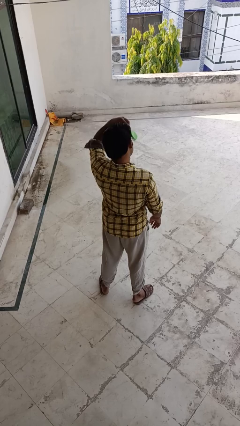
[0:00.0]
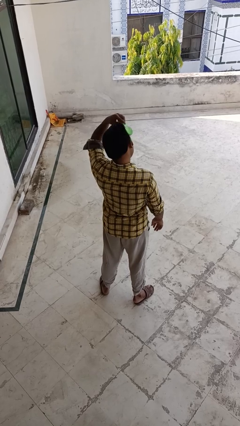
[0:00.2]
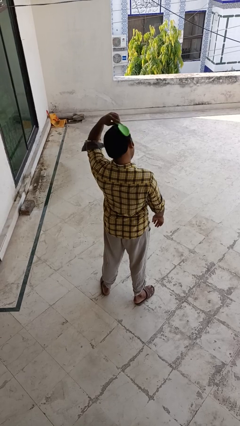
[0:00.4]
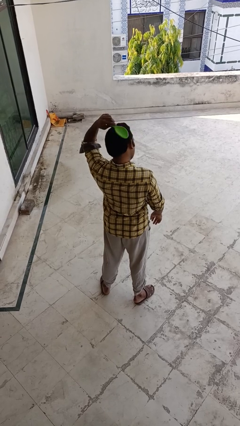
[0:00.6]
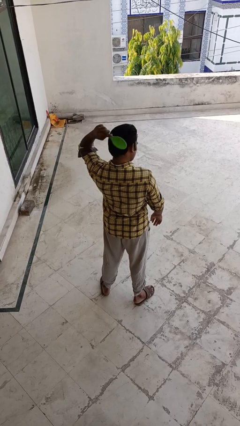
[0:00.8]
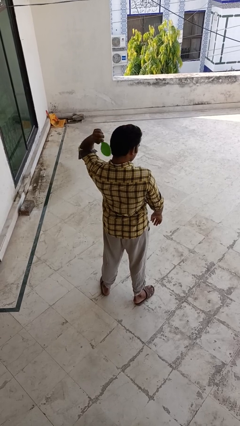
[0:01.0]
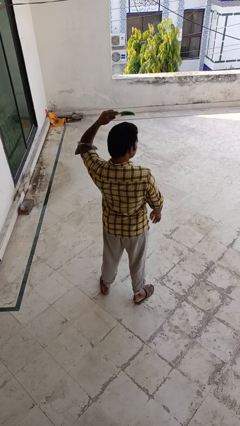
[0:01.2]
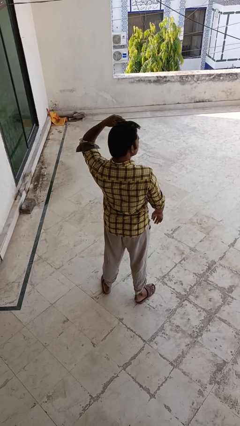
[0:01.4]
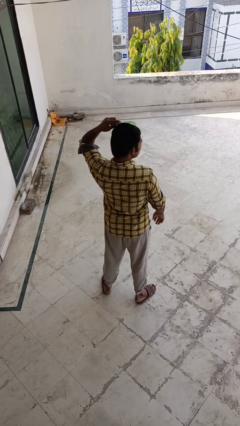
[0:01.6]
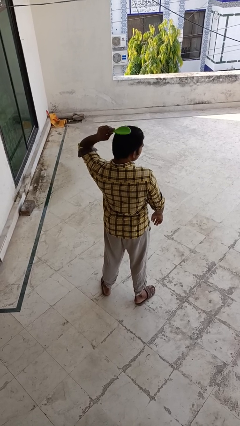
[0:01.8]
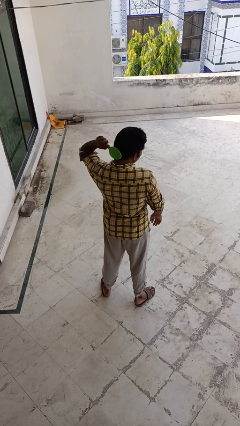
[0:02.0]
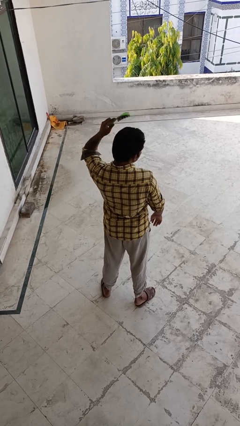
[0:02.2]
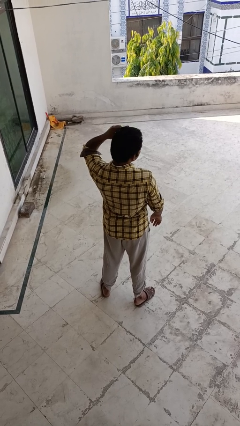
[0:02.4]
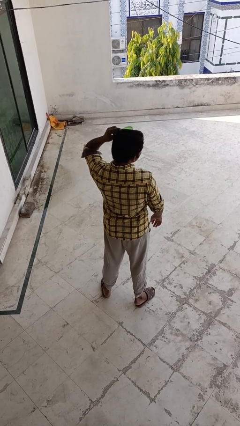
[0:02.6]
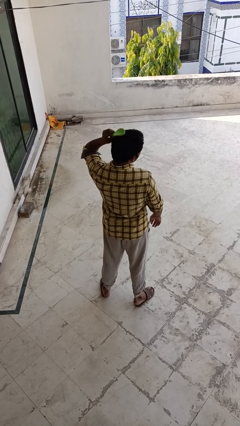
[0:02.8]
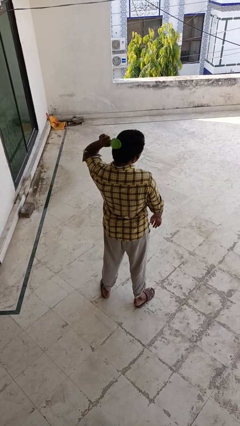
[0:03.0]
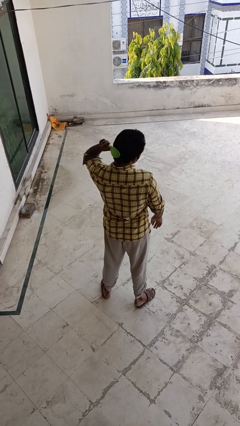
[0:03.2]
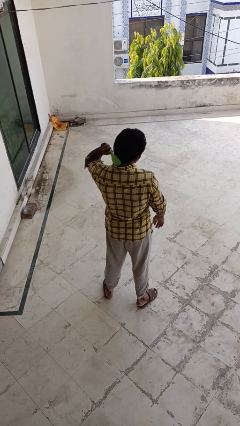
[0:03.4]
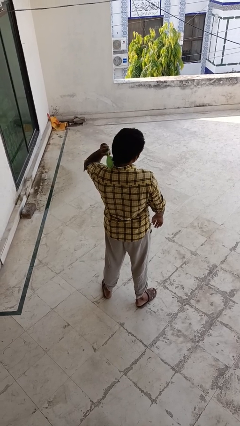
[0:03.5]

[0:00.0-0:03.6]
person brushes hair

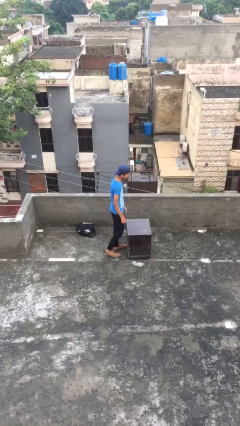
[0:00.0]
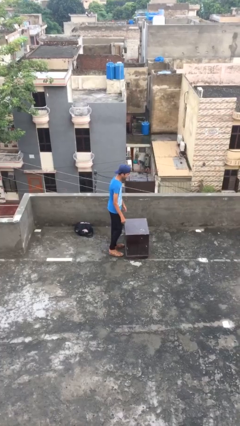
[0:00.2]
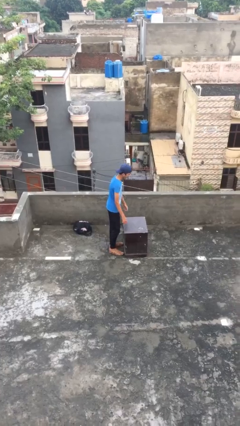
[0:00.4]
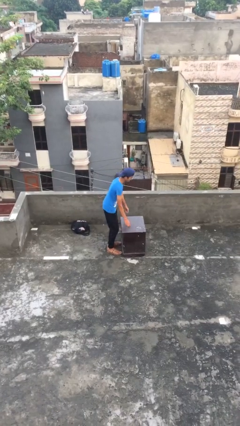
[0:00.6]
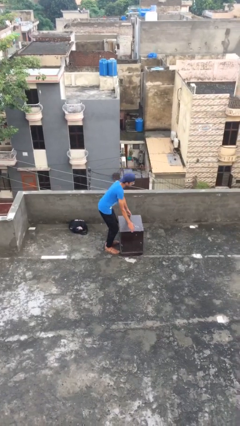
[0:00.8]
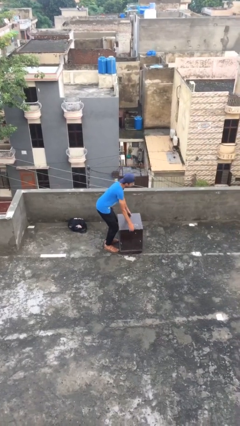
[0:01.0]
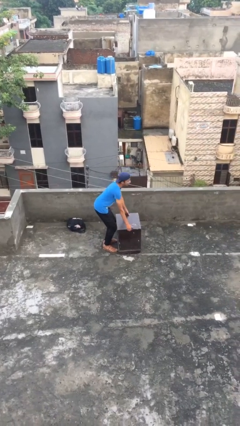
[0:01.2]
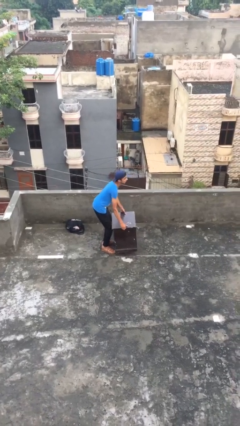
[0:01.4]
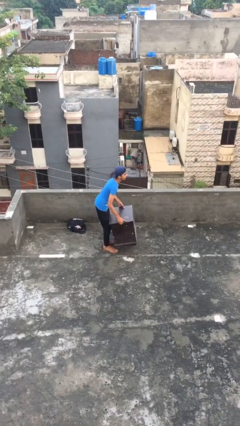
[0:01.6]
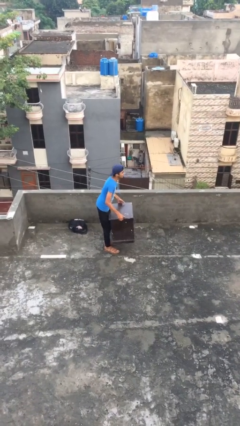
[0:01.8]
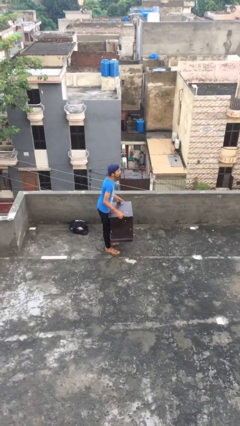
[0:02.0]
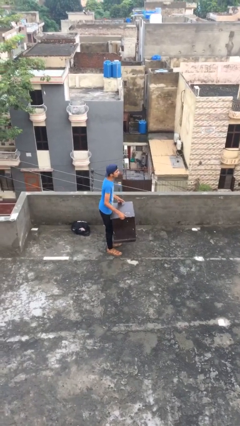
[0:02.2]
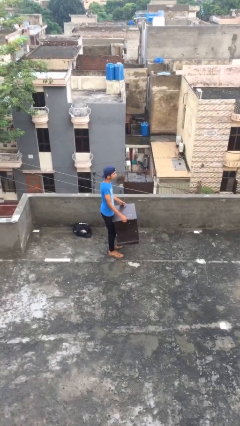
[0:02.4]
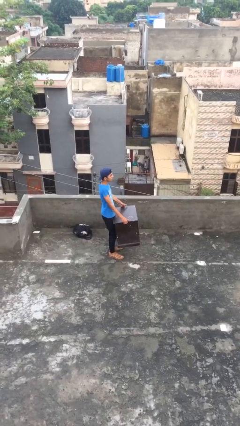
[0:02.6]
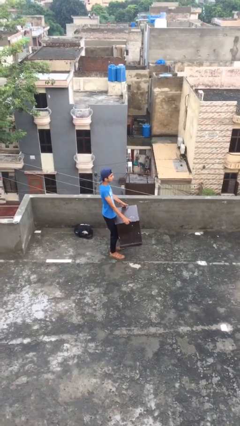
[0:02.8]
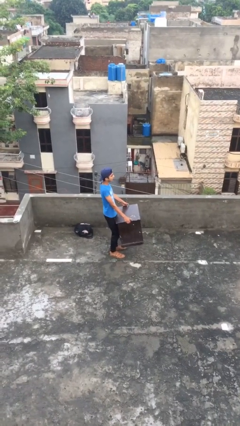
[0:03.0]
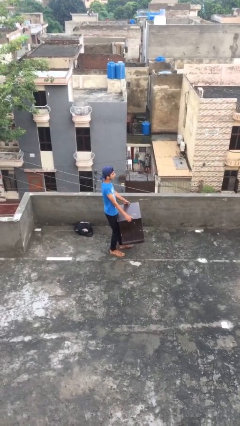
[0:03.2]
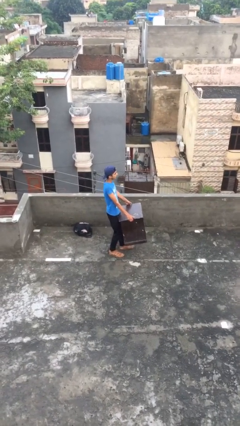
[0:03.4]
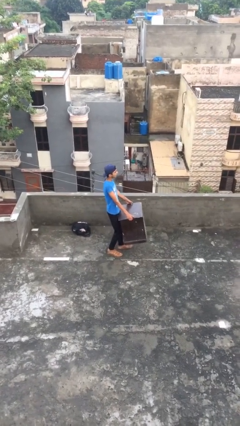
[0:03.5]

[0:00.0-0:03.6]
person picks up object from floor

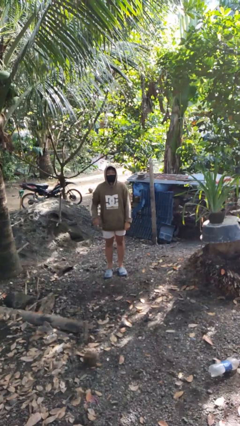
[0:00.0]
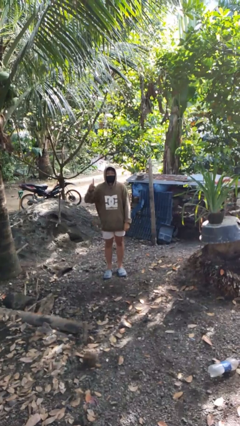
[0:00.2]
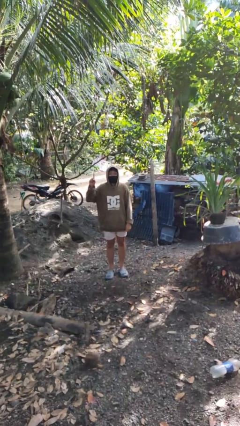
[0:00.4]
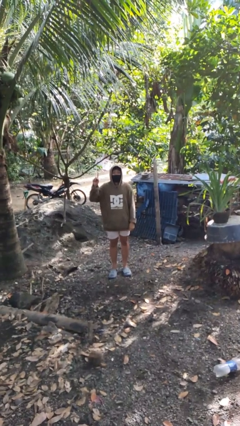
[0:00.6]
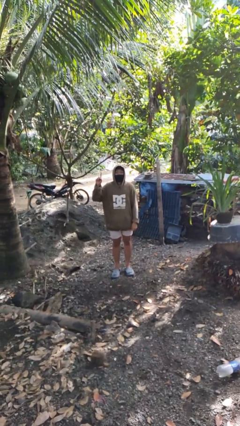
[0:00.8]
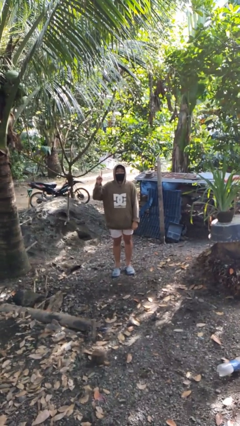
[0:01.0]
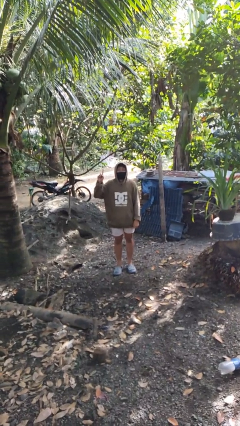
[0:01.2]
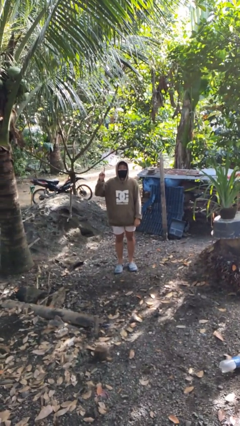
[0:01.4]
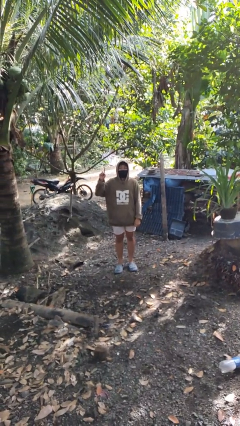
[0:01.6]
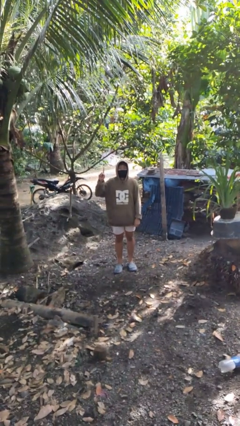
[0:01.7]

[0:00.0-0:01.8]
person gestures number one

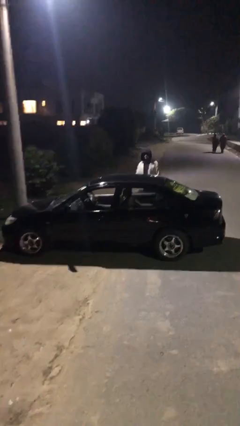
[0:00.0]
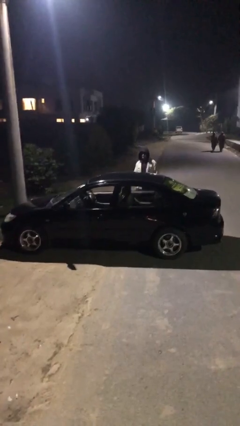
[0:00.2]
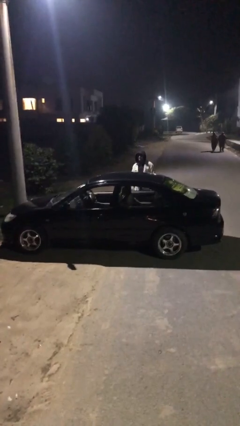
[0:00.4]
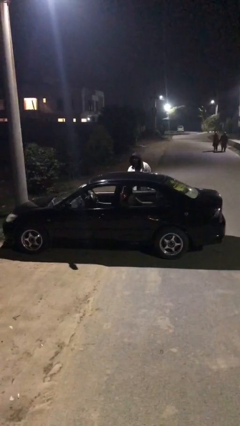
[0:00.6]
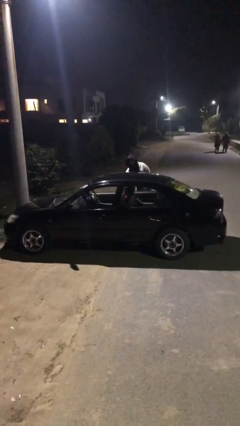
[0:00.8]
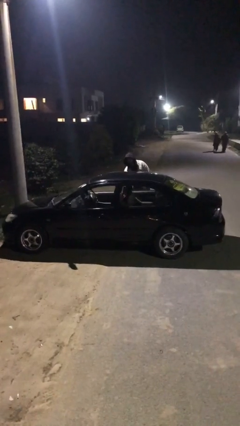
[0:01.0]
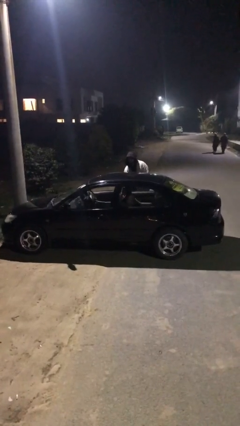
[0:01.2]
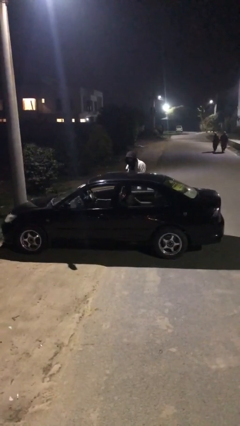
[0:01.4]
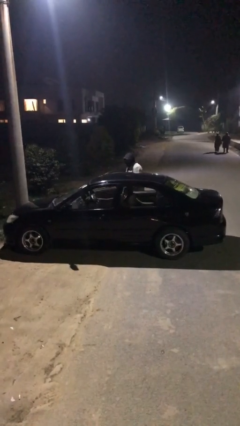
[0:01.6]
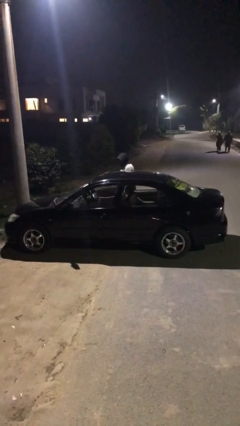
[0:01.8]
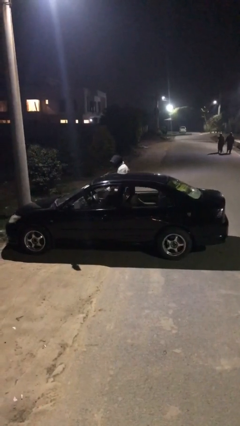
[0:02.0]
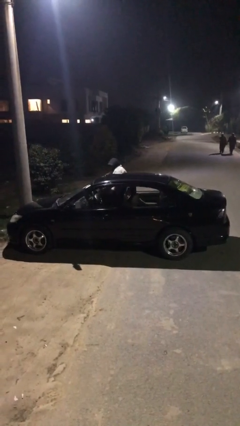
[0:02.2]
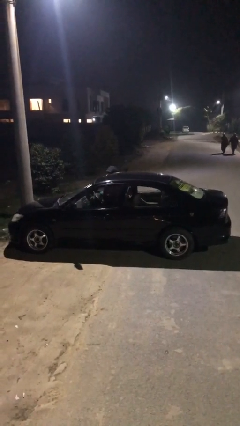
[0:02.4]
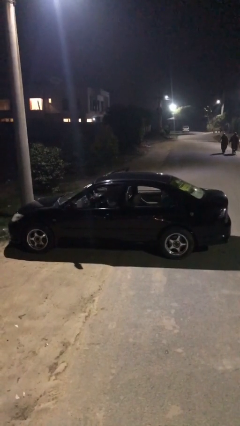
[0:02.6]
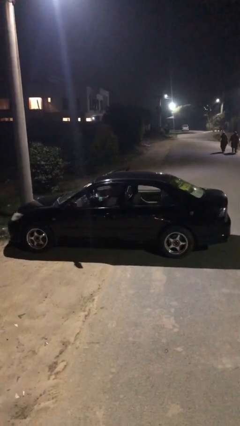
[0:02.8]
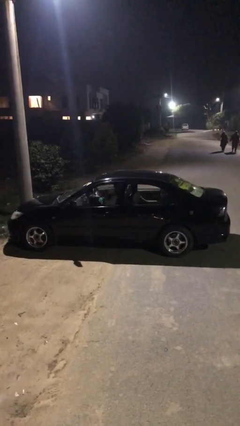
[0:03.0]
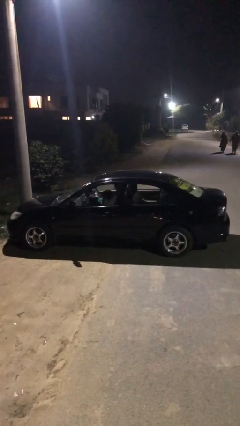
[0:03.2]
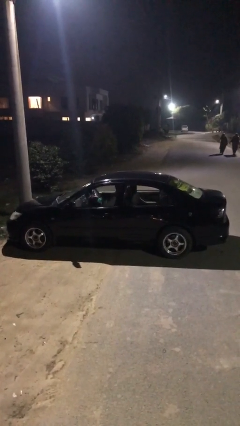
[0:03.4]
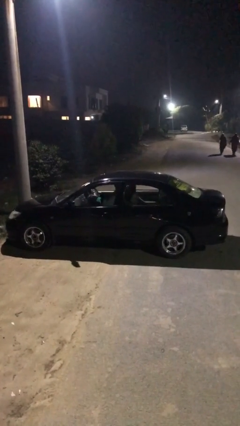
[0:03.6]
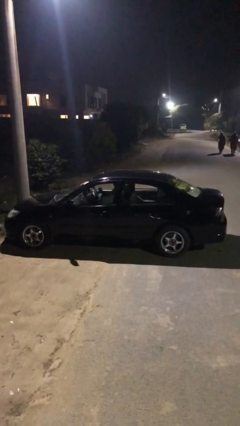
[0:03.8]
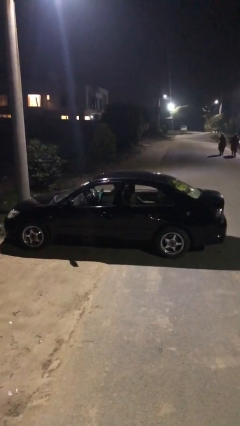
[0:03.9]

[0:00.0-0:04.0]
car picks up person

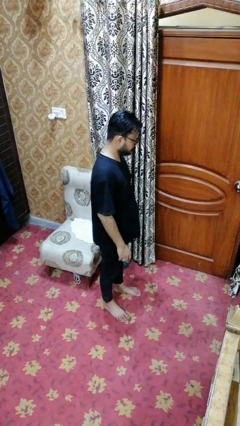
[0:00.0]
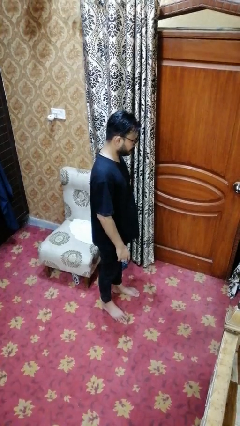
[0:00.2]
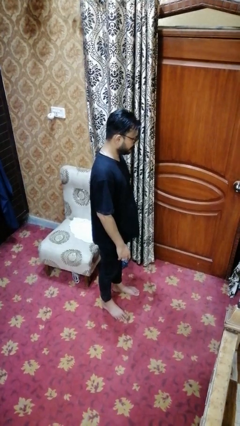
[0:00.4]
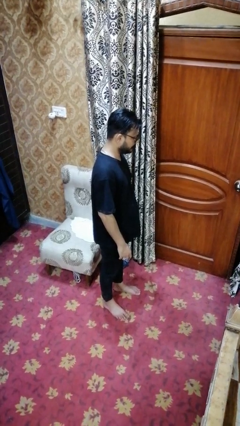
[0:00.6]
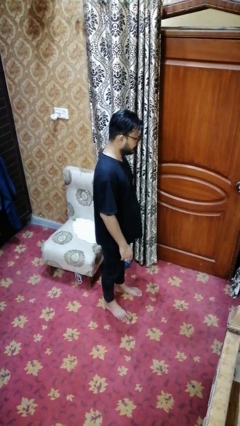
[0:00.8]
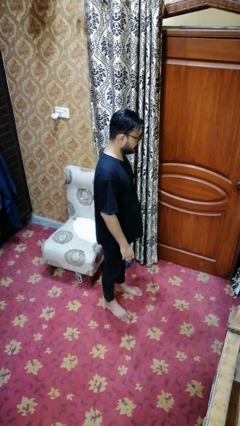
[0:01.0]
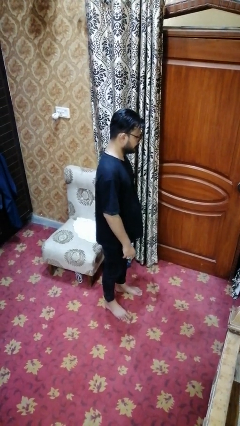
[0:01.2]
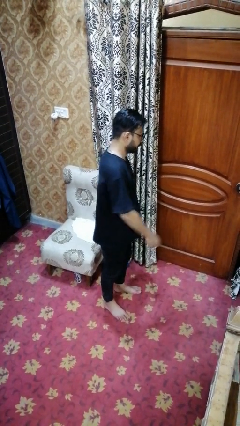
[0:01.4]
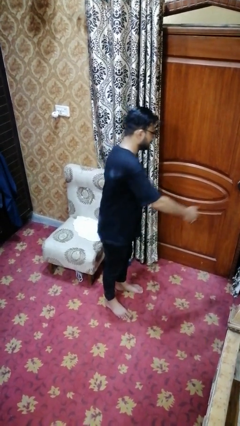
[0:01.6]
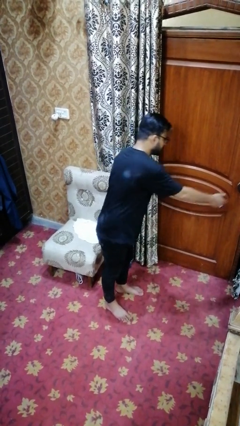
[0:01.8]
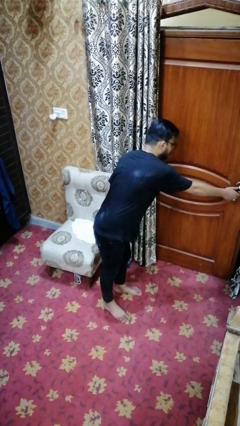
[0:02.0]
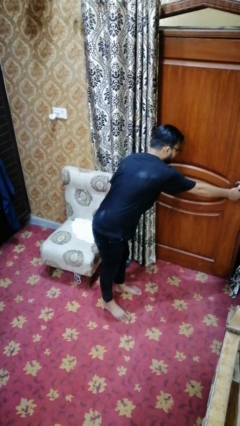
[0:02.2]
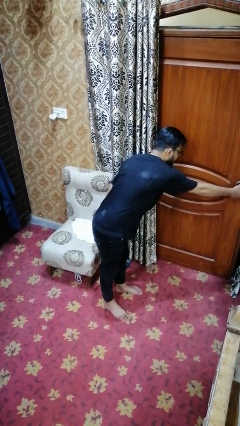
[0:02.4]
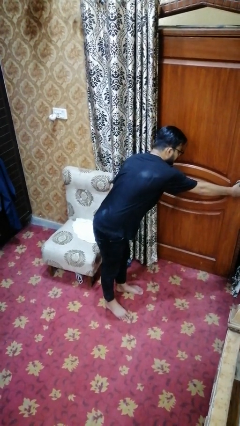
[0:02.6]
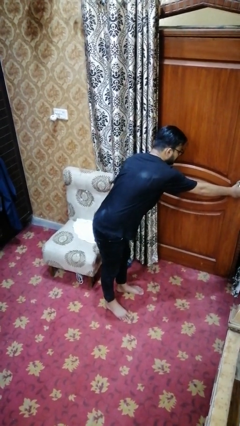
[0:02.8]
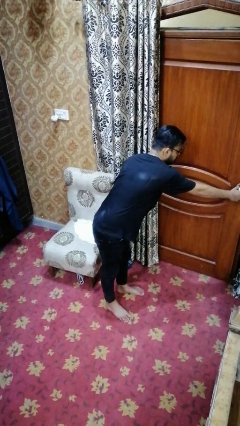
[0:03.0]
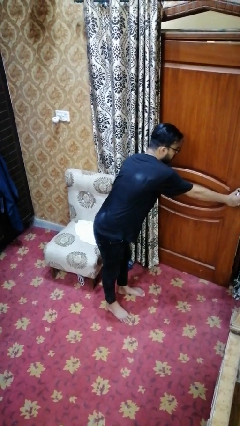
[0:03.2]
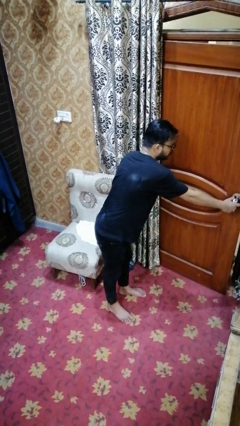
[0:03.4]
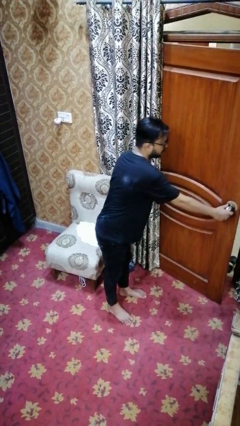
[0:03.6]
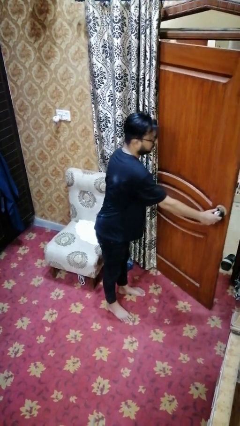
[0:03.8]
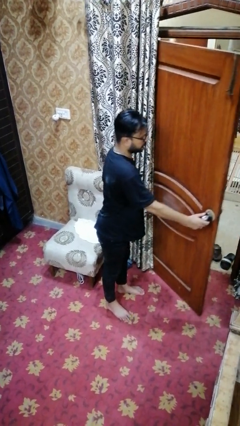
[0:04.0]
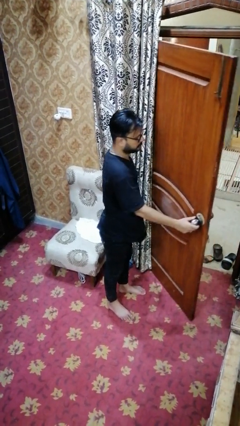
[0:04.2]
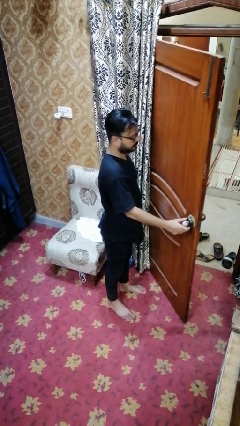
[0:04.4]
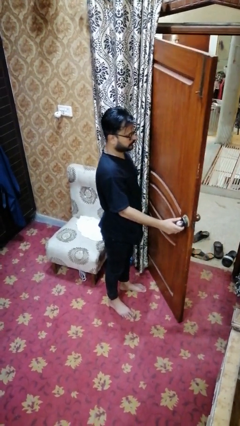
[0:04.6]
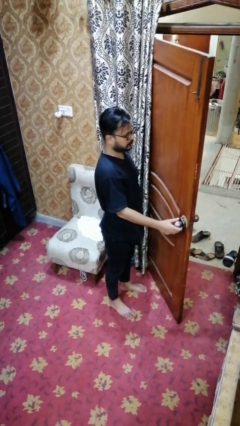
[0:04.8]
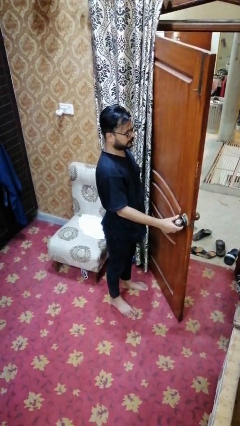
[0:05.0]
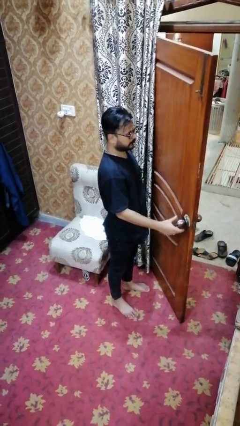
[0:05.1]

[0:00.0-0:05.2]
person opens facility door
